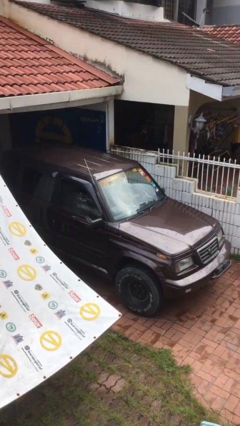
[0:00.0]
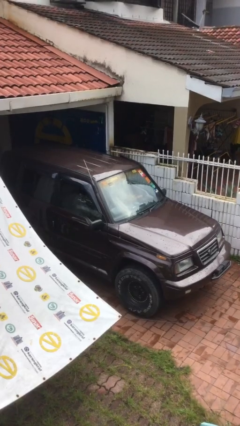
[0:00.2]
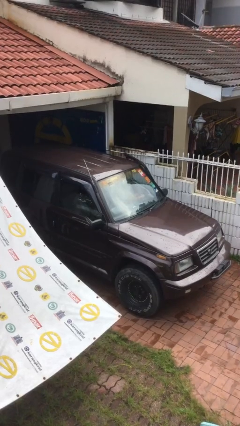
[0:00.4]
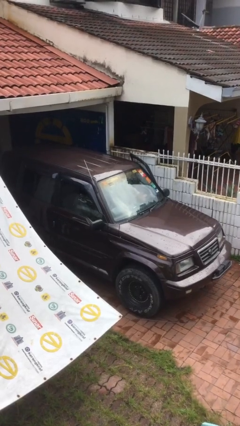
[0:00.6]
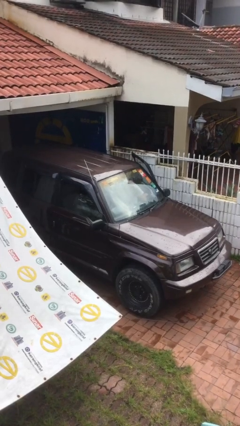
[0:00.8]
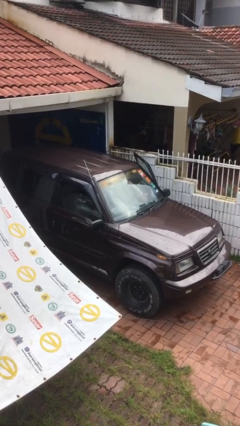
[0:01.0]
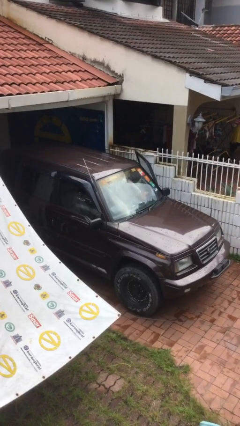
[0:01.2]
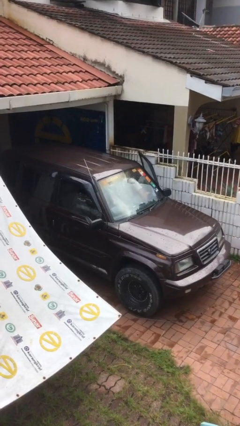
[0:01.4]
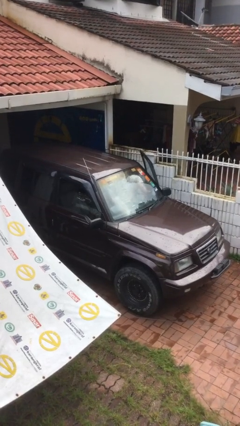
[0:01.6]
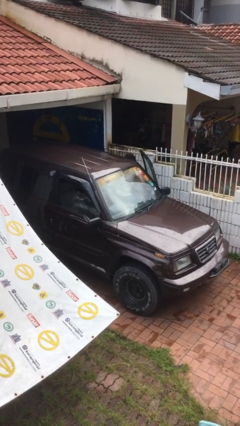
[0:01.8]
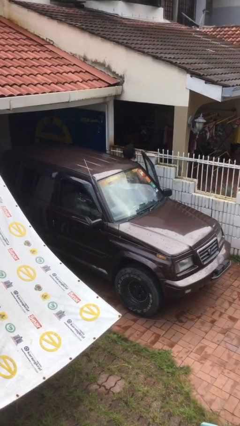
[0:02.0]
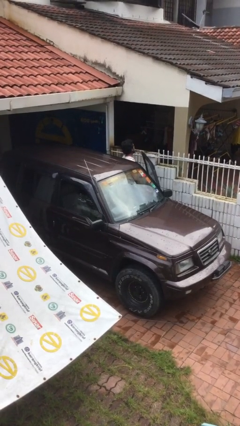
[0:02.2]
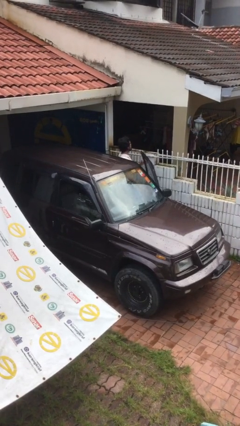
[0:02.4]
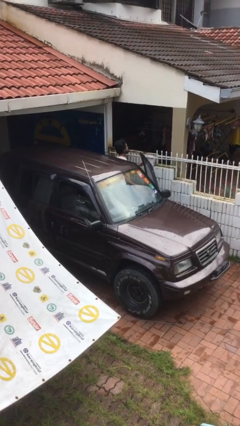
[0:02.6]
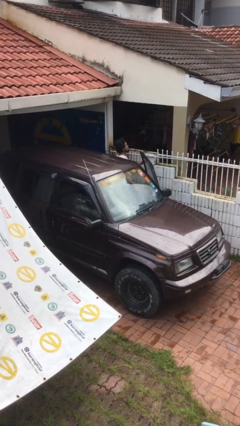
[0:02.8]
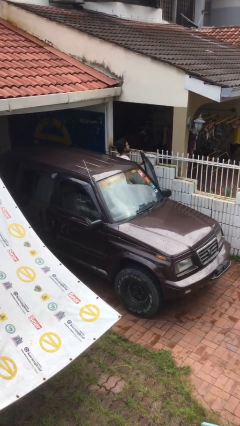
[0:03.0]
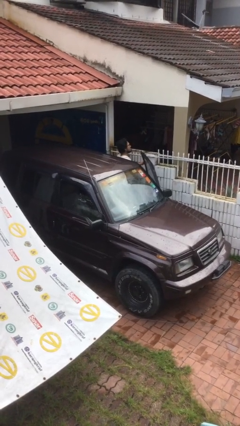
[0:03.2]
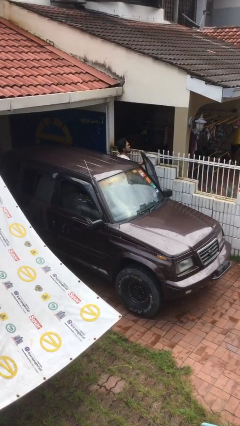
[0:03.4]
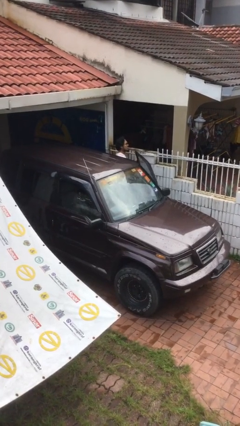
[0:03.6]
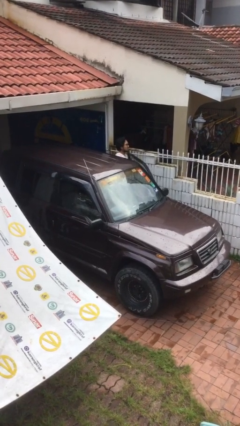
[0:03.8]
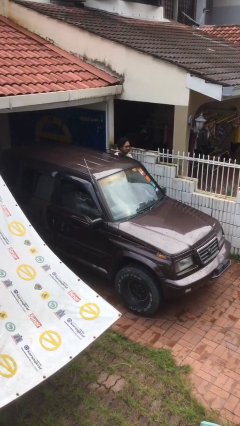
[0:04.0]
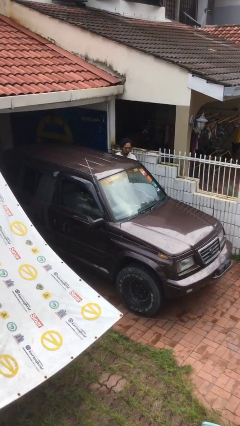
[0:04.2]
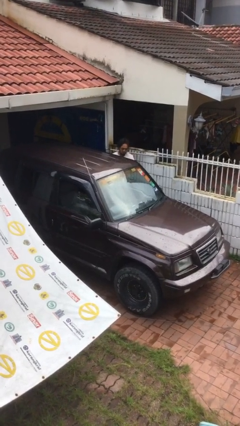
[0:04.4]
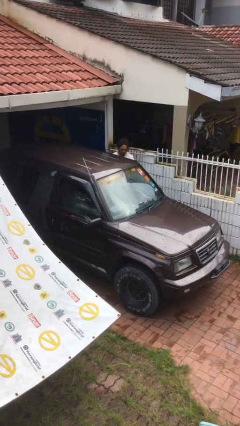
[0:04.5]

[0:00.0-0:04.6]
car drops off person

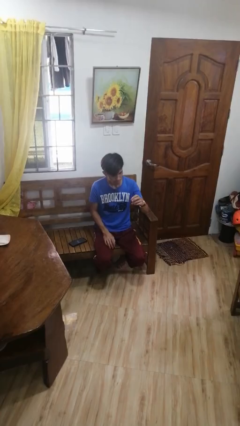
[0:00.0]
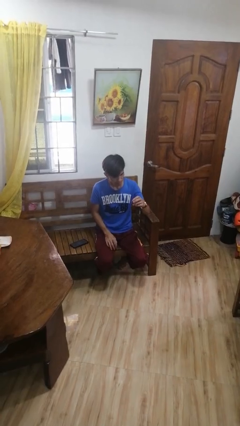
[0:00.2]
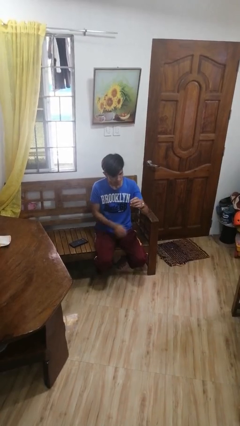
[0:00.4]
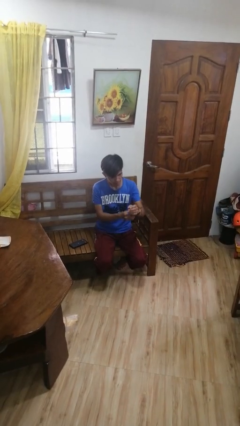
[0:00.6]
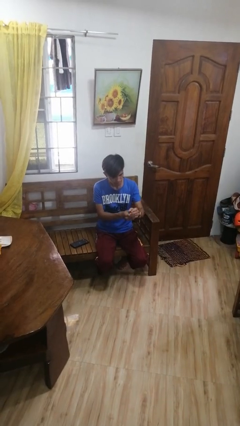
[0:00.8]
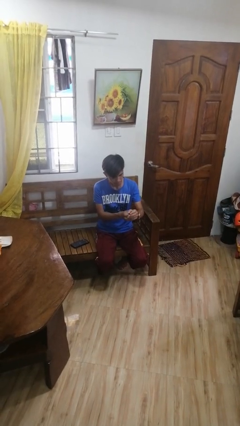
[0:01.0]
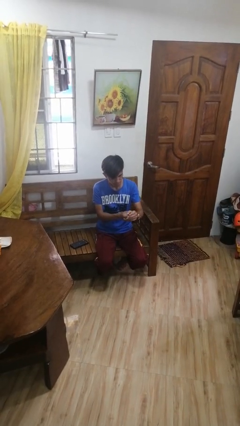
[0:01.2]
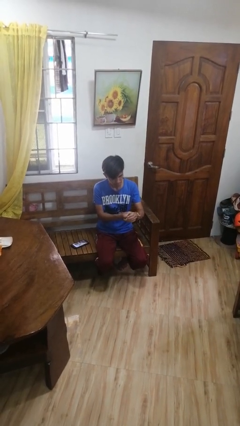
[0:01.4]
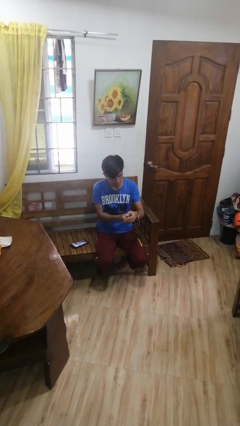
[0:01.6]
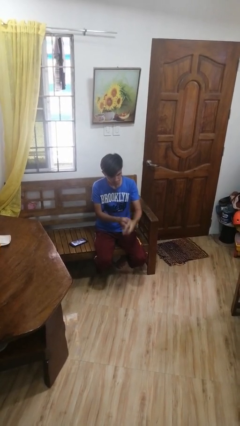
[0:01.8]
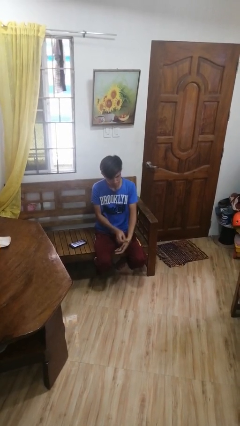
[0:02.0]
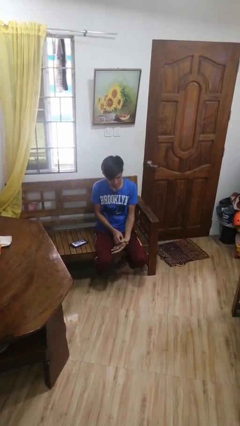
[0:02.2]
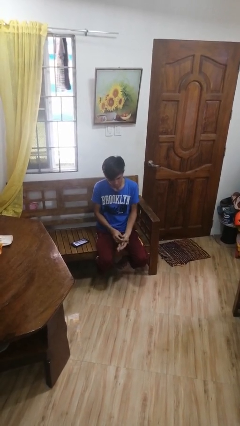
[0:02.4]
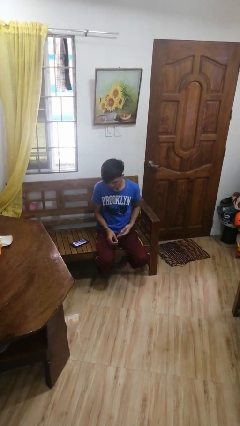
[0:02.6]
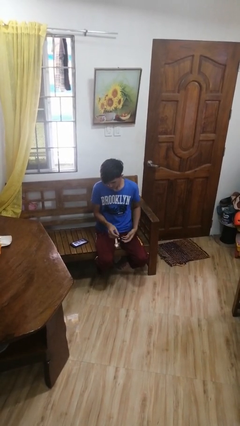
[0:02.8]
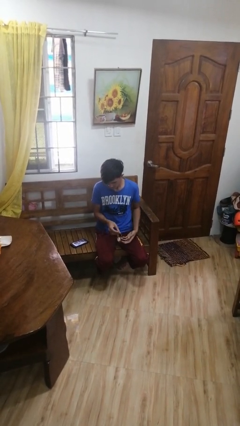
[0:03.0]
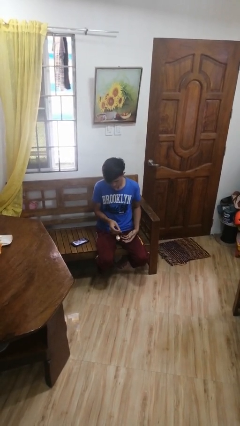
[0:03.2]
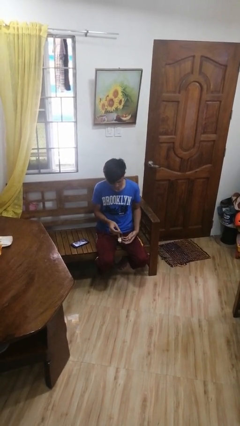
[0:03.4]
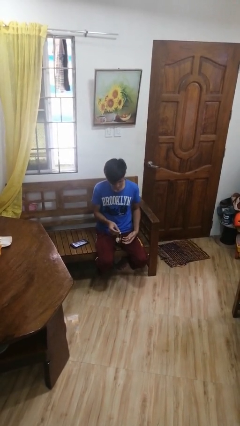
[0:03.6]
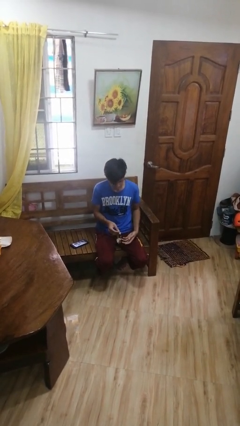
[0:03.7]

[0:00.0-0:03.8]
person takes off wristwatch

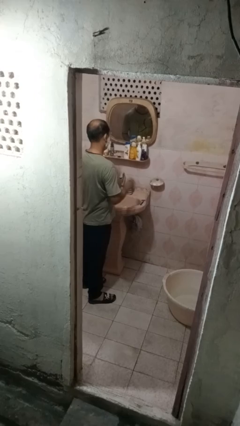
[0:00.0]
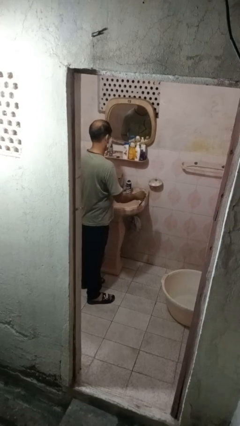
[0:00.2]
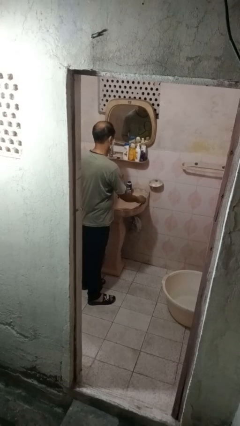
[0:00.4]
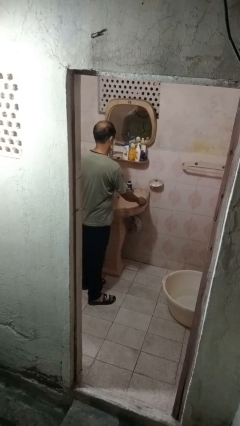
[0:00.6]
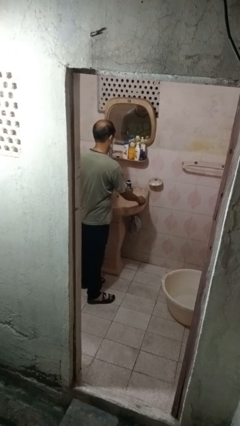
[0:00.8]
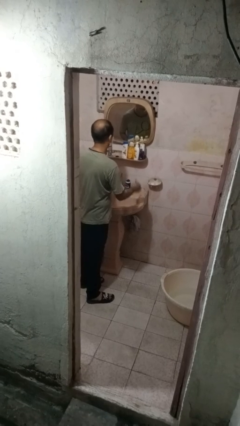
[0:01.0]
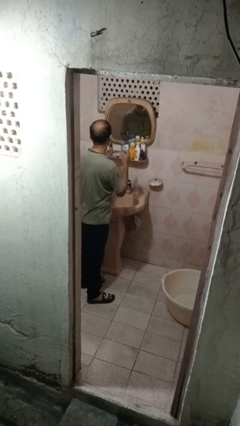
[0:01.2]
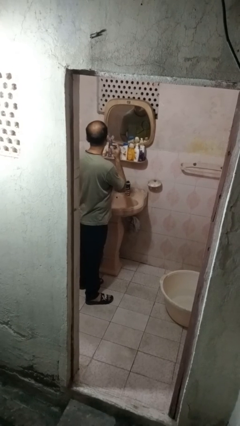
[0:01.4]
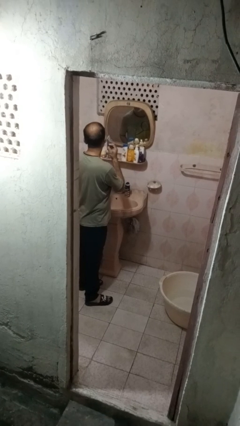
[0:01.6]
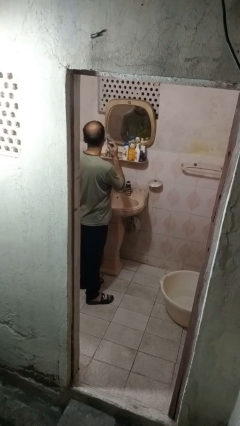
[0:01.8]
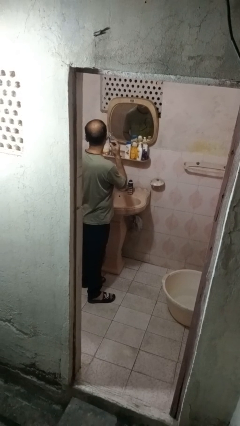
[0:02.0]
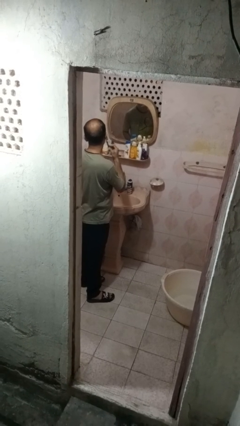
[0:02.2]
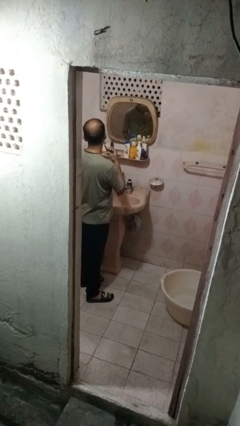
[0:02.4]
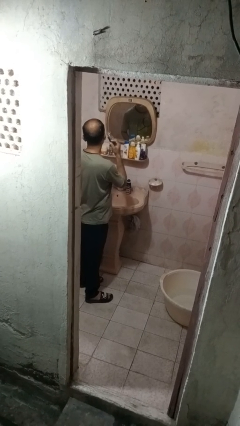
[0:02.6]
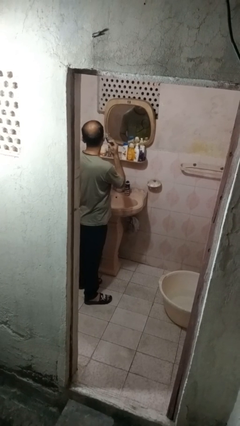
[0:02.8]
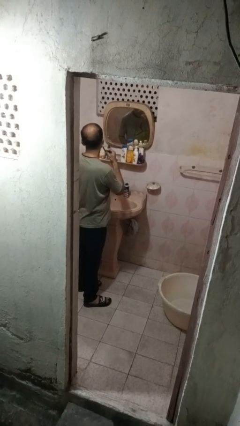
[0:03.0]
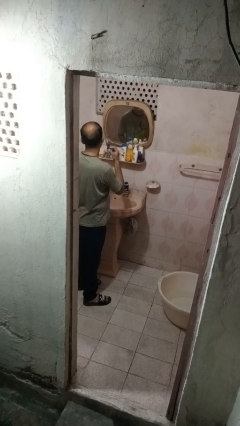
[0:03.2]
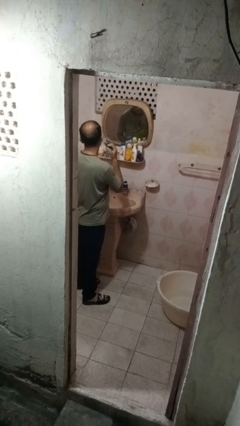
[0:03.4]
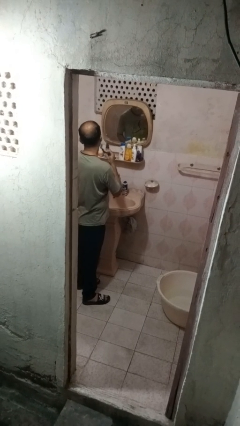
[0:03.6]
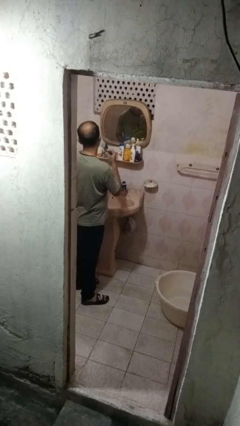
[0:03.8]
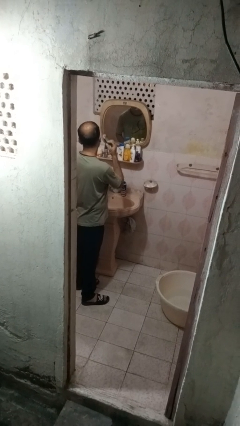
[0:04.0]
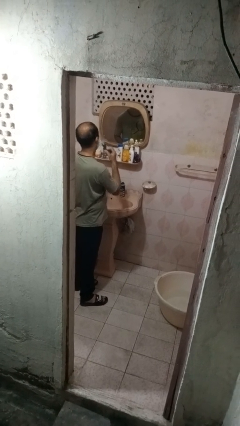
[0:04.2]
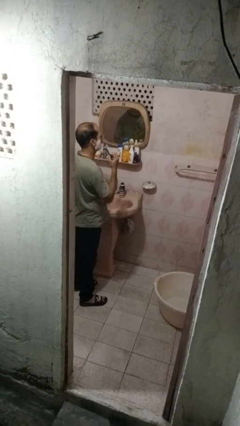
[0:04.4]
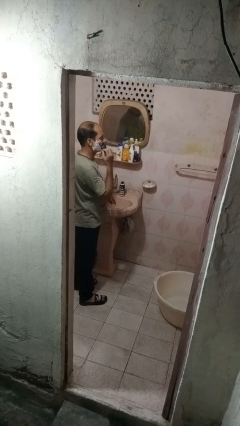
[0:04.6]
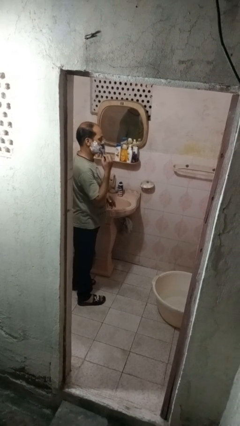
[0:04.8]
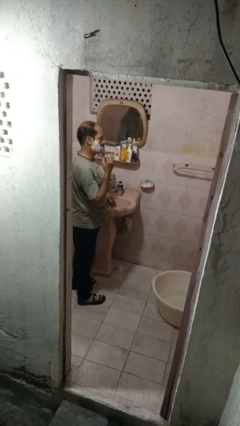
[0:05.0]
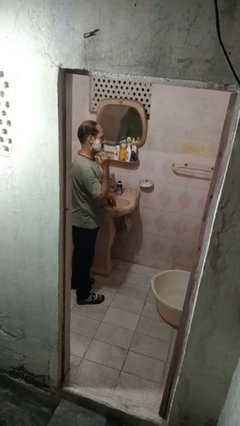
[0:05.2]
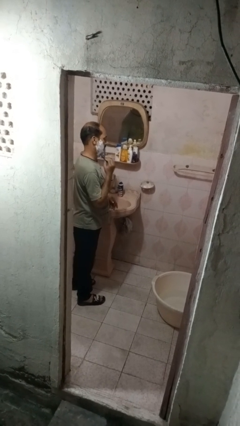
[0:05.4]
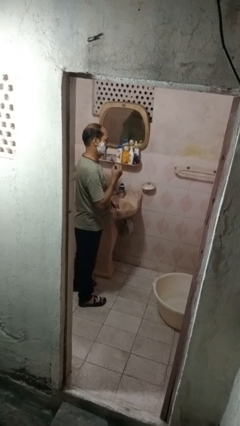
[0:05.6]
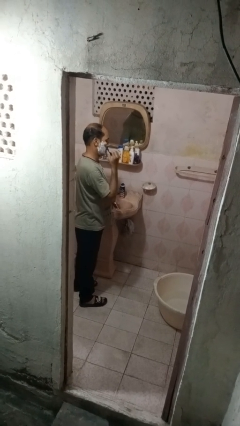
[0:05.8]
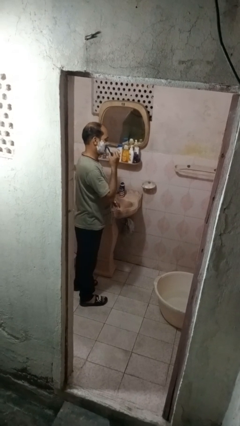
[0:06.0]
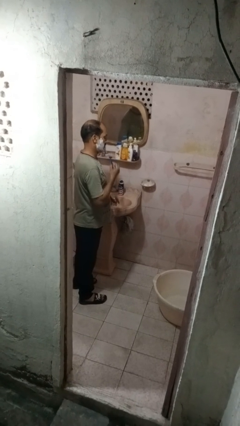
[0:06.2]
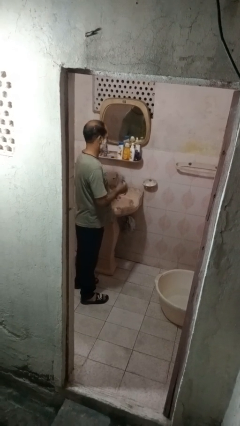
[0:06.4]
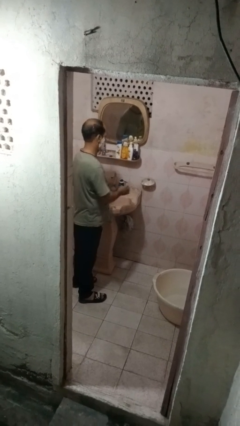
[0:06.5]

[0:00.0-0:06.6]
person shaves face

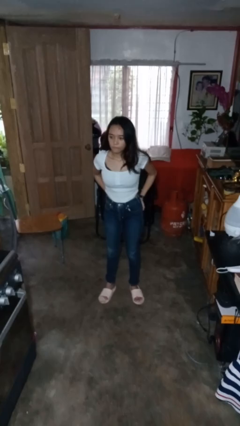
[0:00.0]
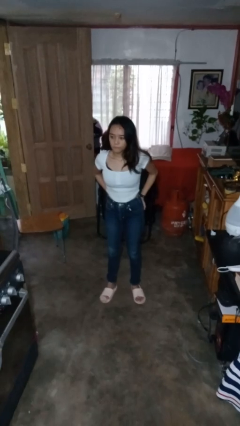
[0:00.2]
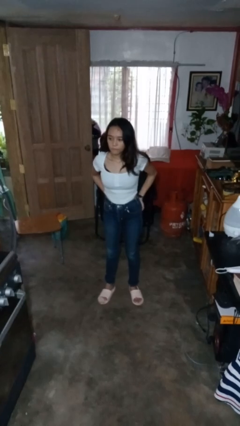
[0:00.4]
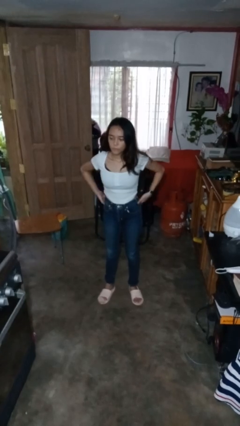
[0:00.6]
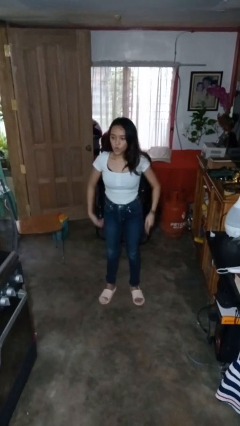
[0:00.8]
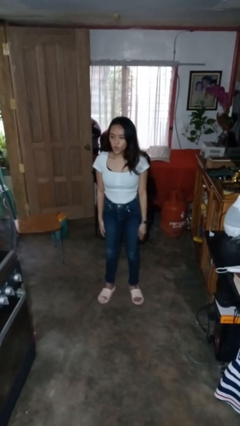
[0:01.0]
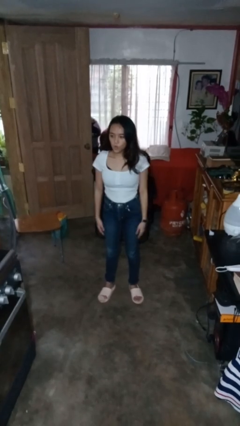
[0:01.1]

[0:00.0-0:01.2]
person puts hands in back pockets

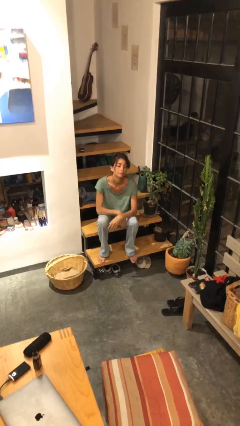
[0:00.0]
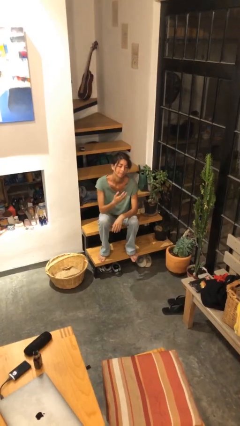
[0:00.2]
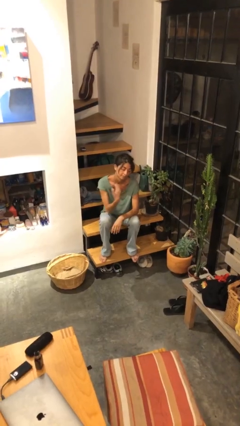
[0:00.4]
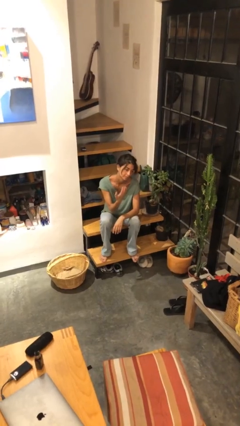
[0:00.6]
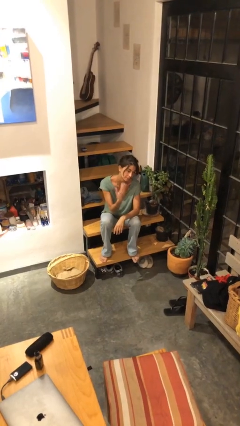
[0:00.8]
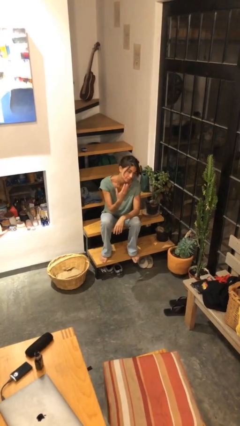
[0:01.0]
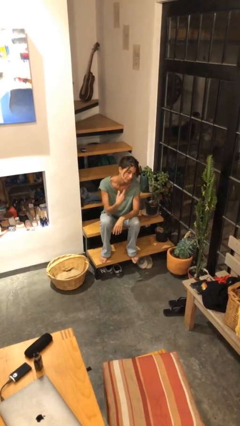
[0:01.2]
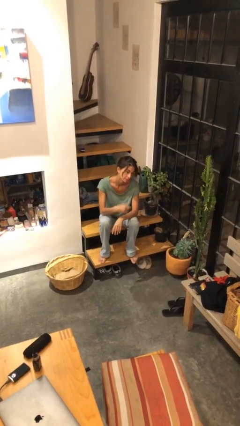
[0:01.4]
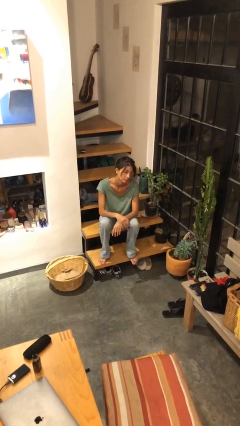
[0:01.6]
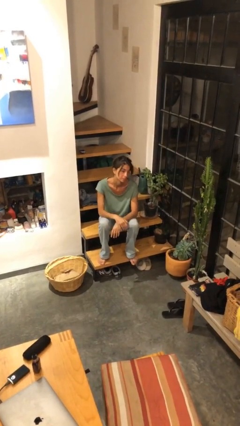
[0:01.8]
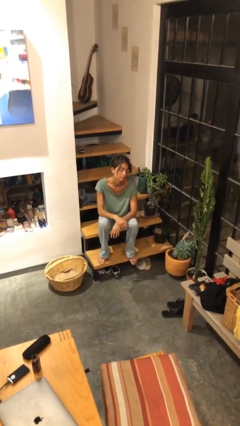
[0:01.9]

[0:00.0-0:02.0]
person gestures come here
